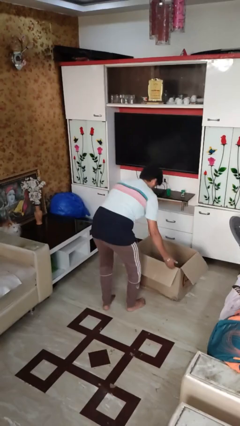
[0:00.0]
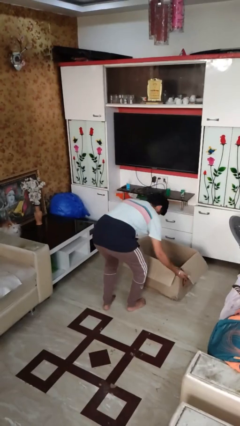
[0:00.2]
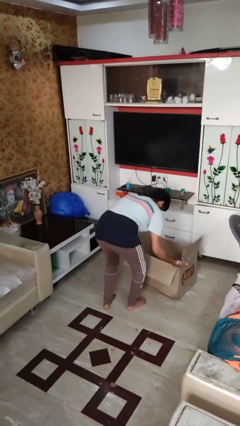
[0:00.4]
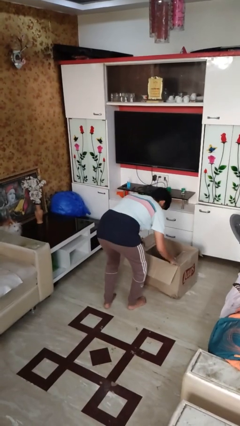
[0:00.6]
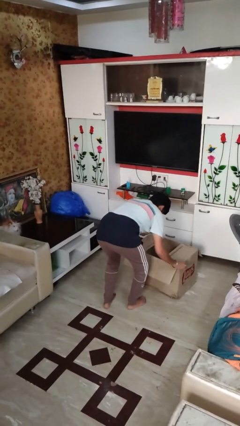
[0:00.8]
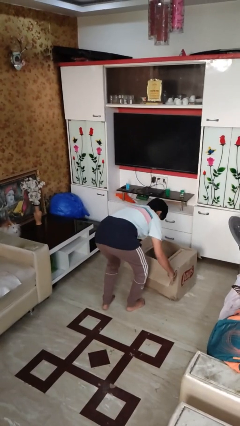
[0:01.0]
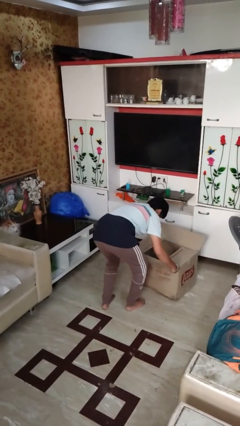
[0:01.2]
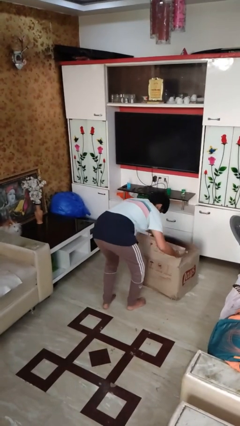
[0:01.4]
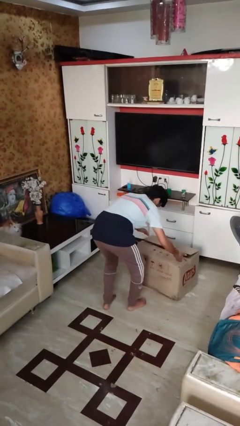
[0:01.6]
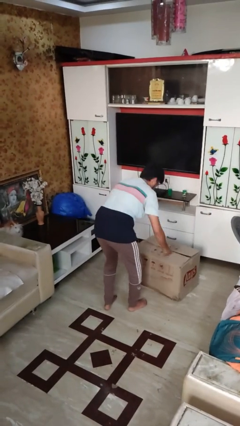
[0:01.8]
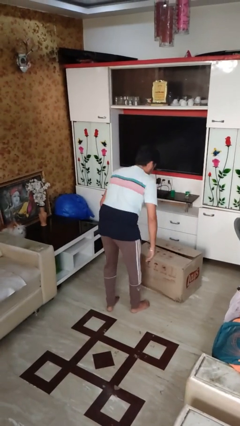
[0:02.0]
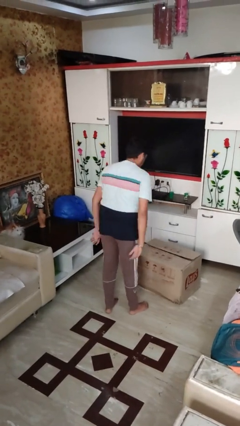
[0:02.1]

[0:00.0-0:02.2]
person closes box

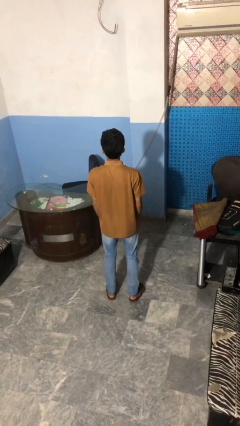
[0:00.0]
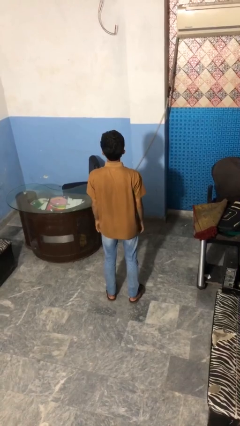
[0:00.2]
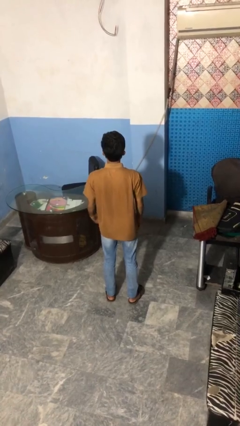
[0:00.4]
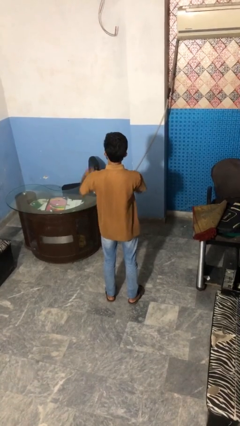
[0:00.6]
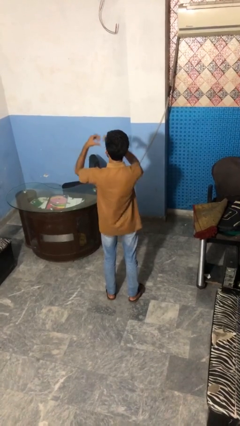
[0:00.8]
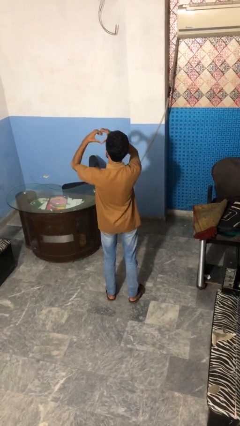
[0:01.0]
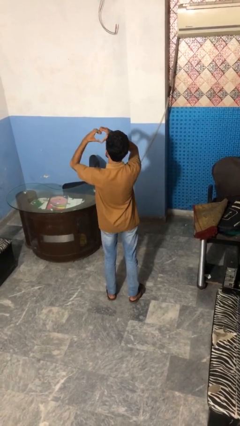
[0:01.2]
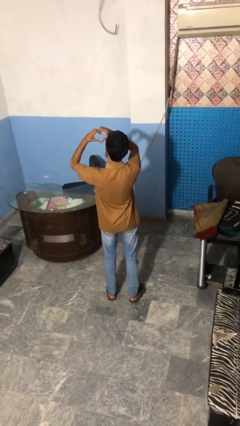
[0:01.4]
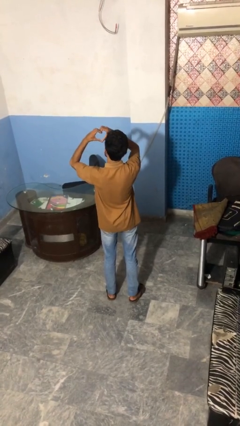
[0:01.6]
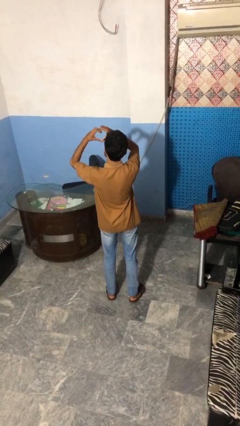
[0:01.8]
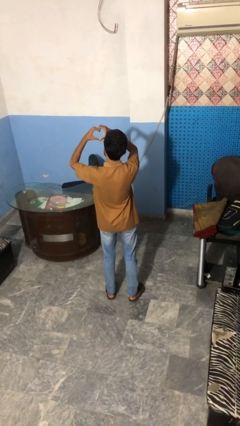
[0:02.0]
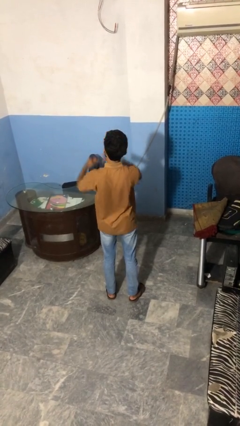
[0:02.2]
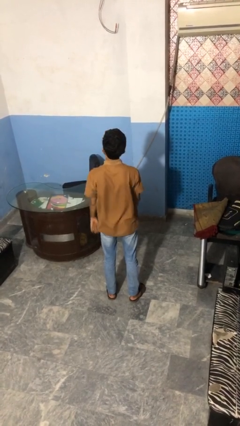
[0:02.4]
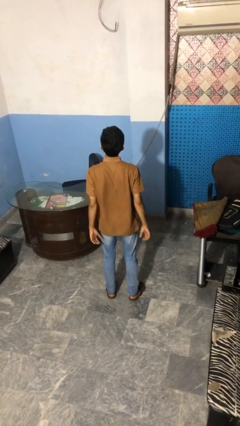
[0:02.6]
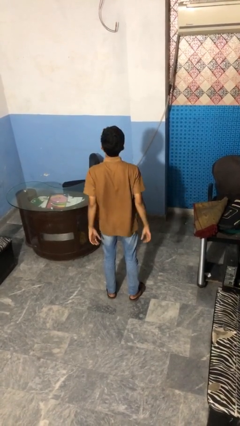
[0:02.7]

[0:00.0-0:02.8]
person gestures heart

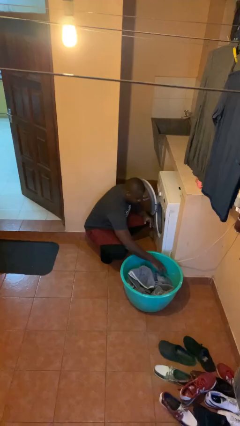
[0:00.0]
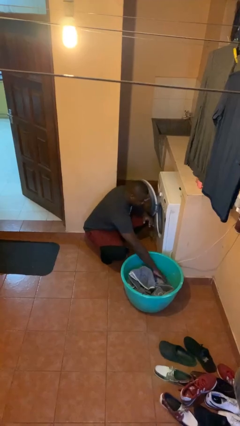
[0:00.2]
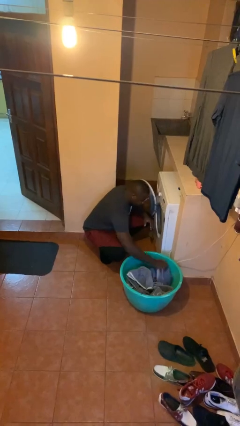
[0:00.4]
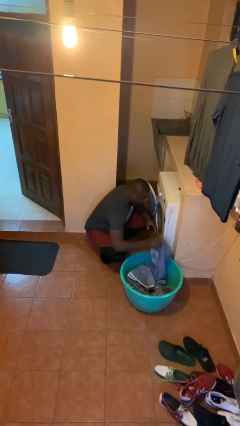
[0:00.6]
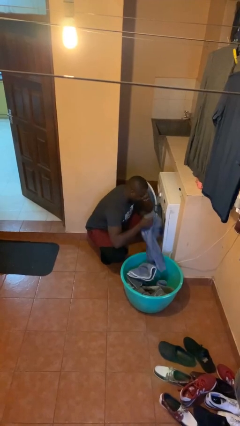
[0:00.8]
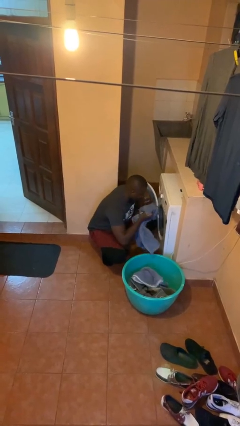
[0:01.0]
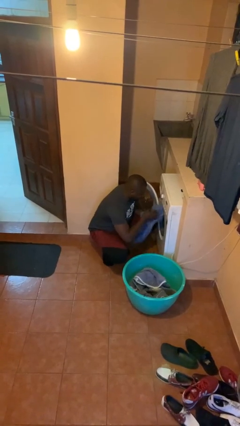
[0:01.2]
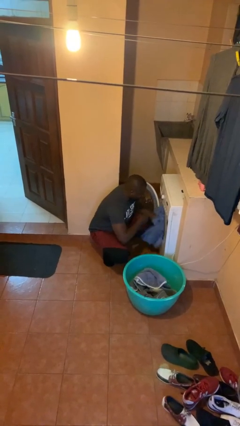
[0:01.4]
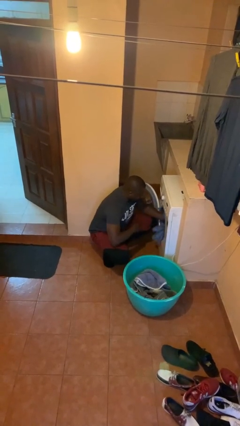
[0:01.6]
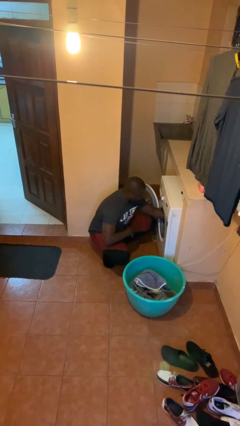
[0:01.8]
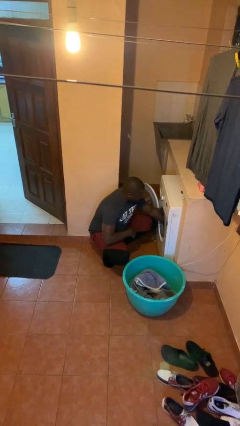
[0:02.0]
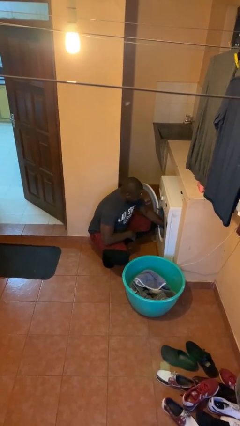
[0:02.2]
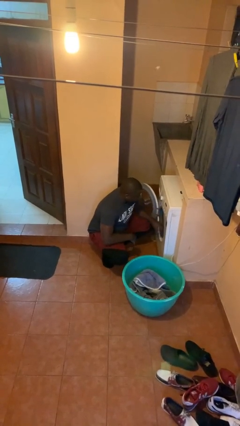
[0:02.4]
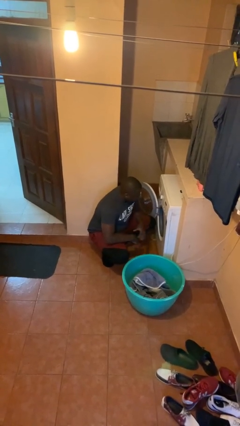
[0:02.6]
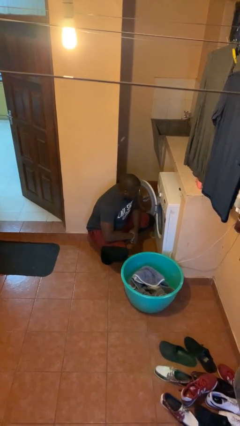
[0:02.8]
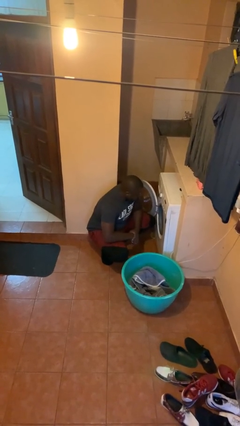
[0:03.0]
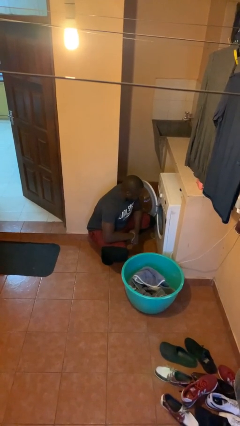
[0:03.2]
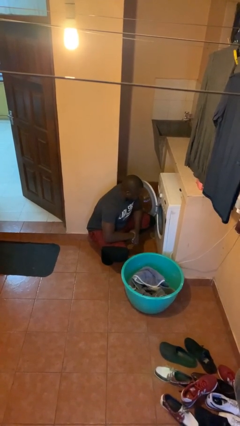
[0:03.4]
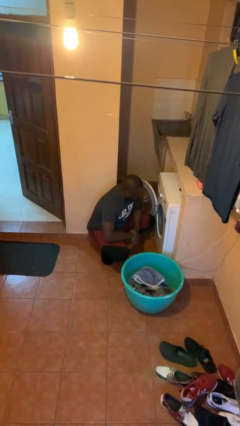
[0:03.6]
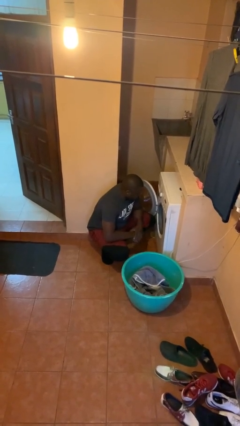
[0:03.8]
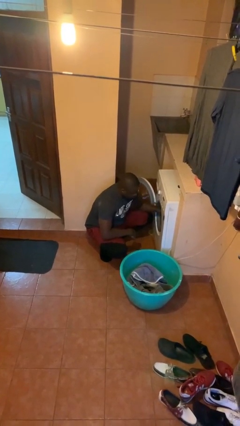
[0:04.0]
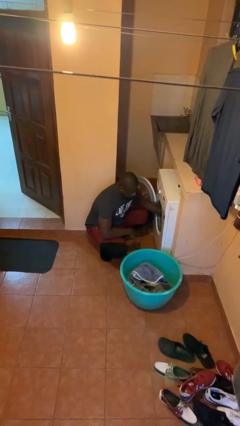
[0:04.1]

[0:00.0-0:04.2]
person loads dryer

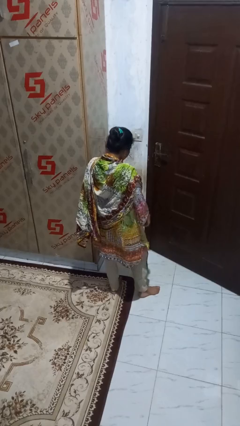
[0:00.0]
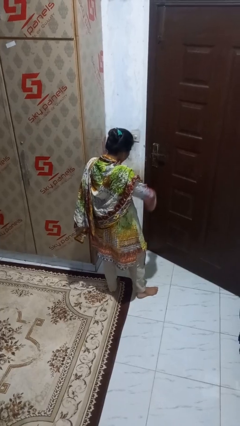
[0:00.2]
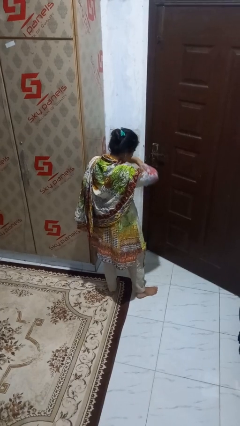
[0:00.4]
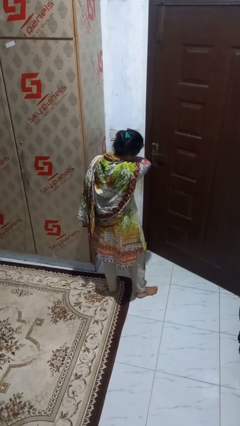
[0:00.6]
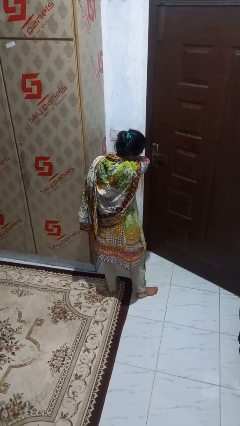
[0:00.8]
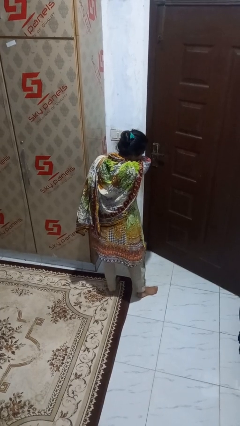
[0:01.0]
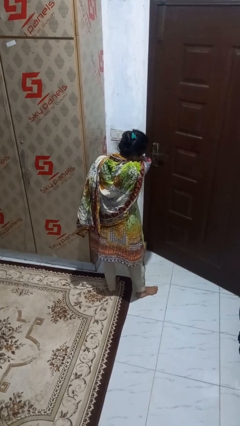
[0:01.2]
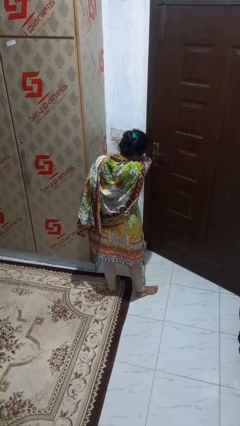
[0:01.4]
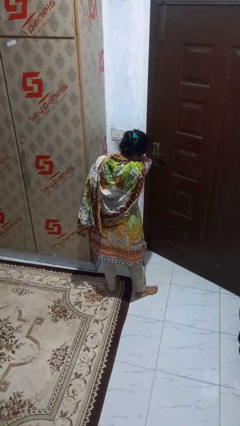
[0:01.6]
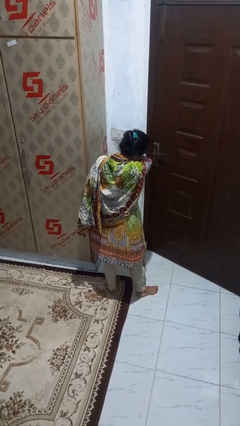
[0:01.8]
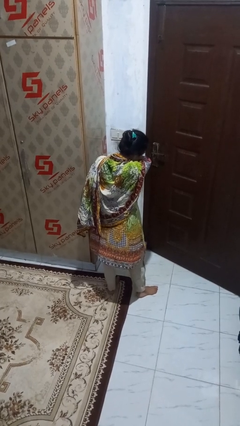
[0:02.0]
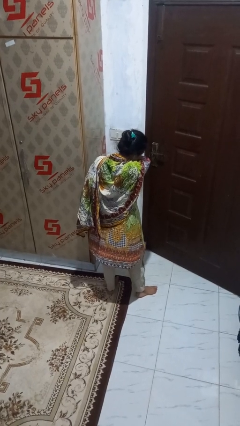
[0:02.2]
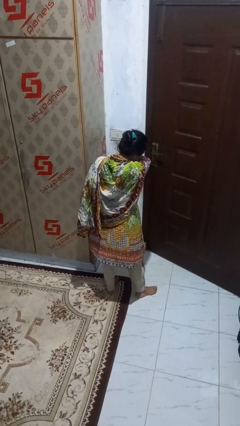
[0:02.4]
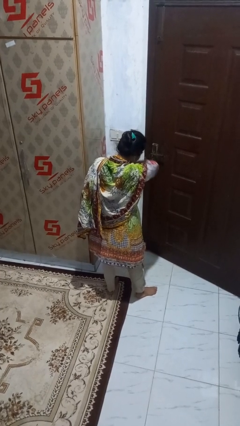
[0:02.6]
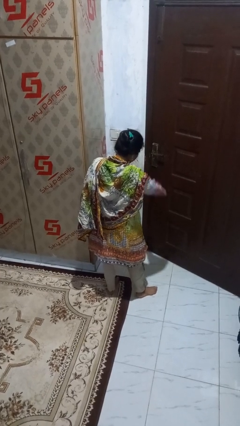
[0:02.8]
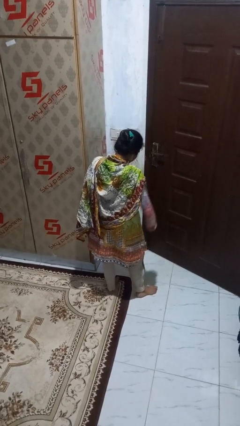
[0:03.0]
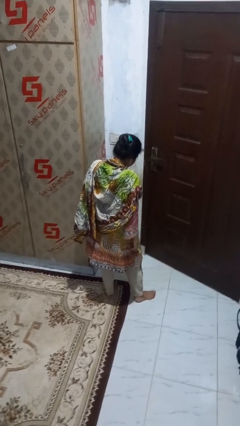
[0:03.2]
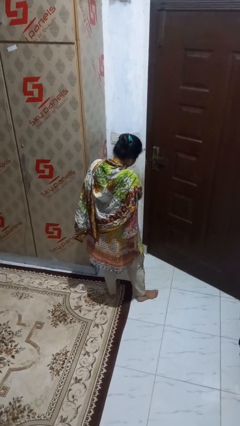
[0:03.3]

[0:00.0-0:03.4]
person sneezes into arm

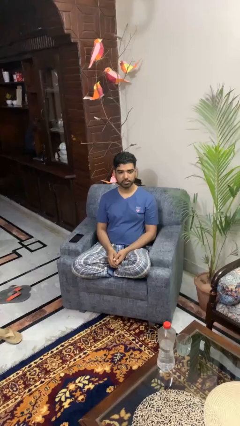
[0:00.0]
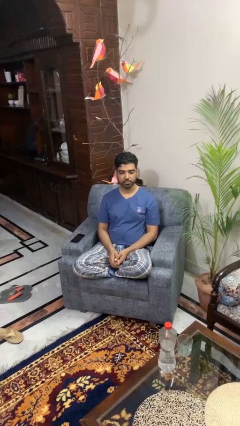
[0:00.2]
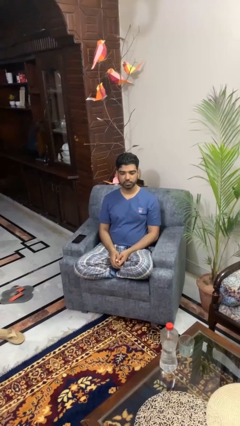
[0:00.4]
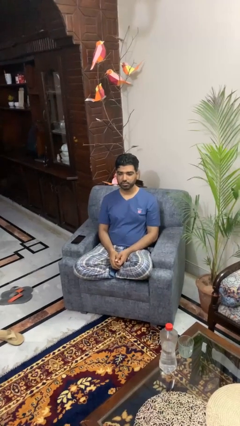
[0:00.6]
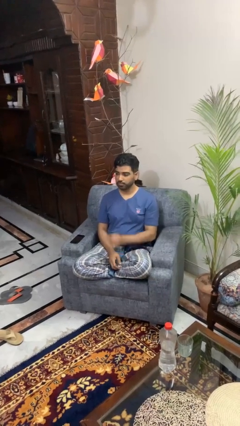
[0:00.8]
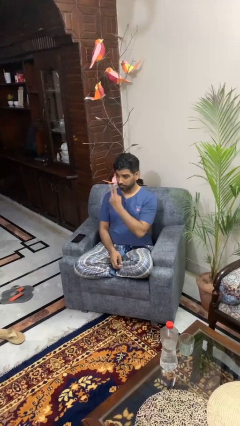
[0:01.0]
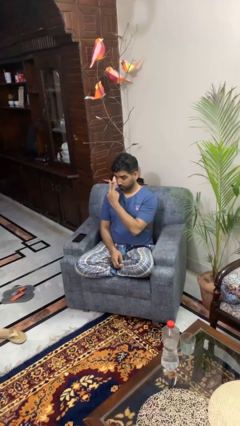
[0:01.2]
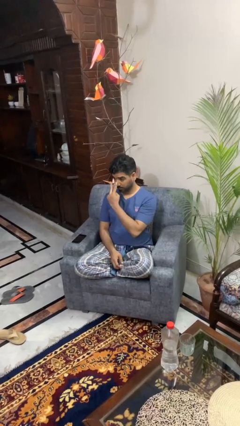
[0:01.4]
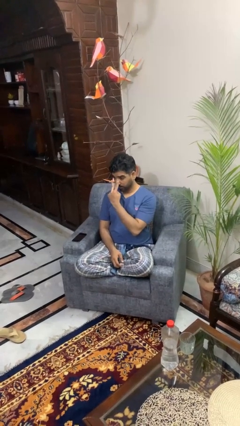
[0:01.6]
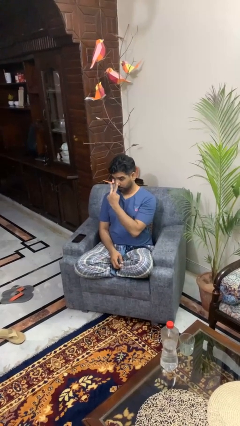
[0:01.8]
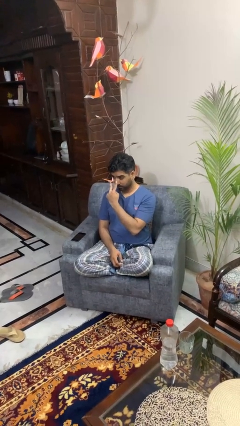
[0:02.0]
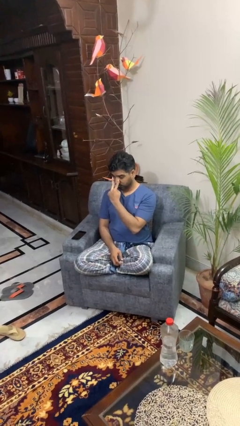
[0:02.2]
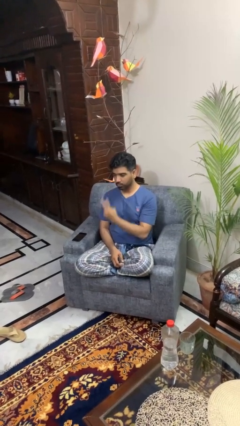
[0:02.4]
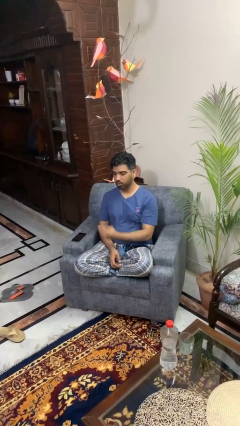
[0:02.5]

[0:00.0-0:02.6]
person gestures watch closely

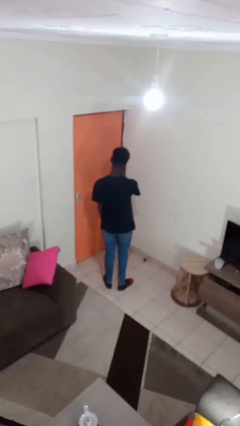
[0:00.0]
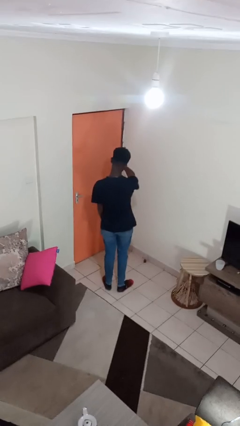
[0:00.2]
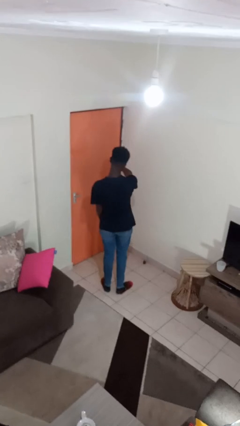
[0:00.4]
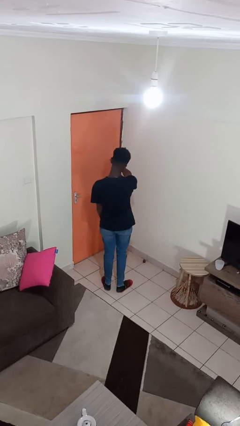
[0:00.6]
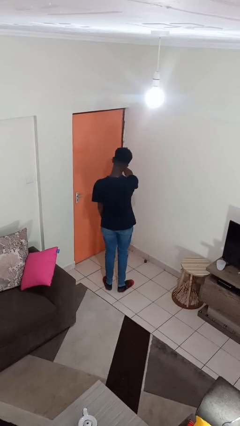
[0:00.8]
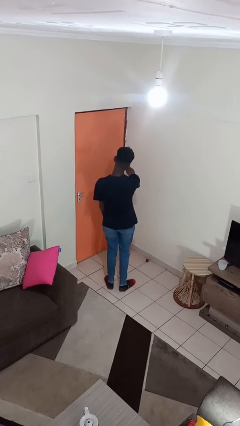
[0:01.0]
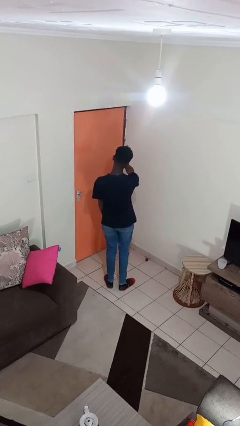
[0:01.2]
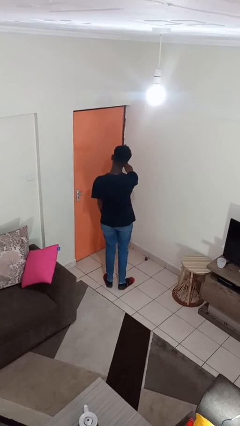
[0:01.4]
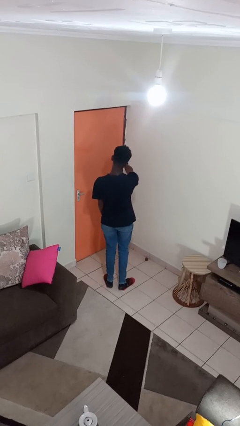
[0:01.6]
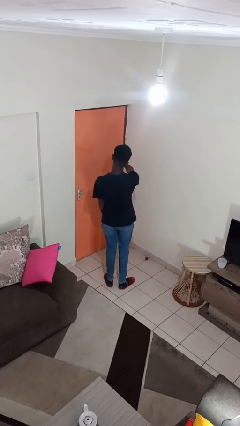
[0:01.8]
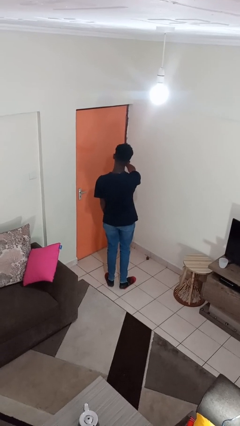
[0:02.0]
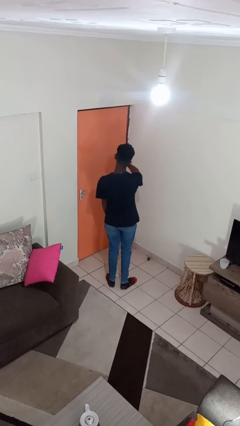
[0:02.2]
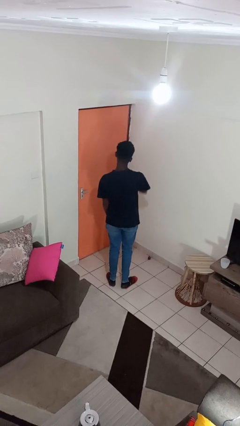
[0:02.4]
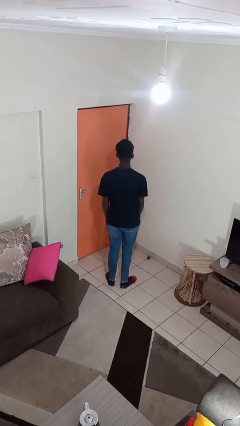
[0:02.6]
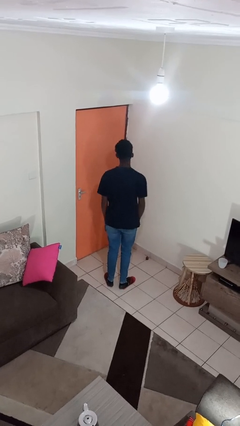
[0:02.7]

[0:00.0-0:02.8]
person gestures stop
